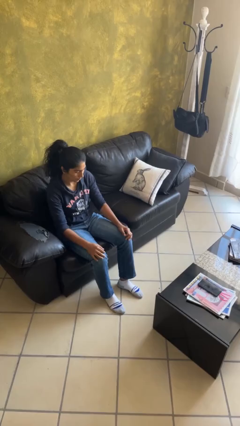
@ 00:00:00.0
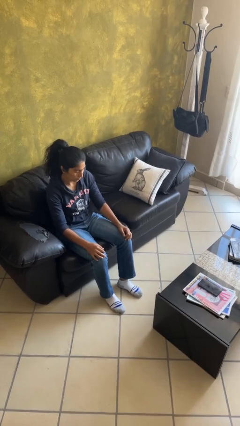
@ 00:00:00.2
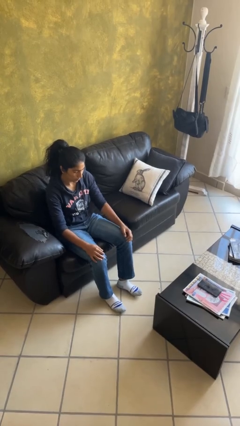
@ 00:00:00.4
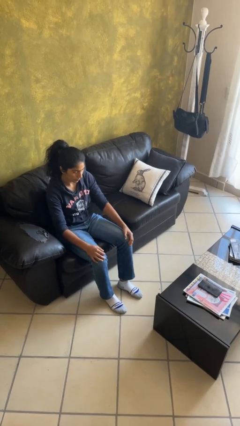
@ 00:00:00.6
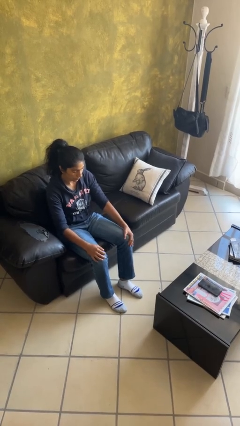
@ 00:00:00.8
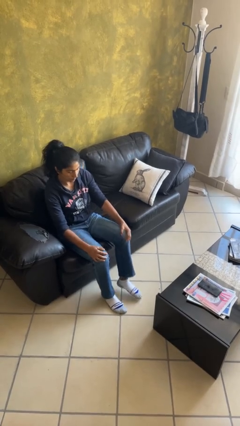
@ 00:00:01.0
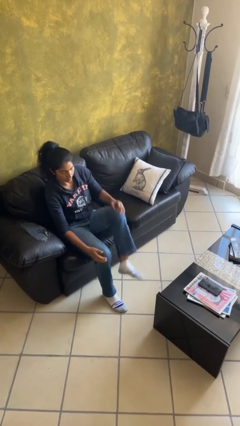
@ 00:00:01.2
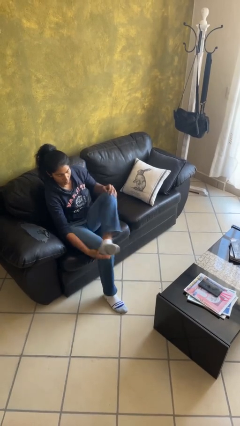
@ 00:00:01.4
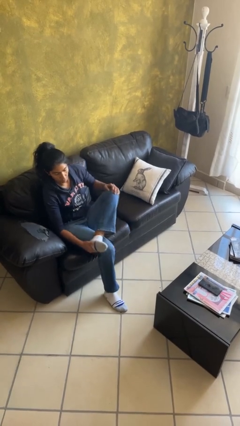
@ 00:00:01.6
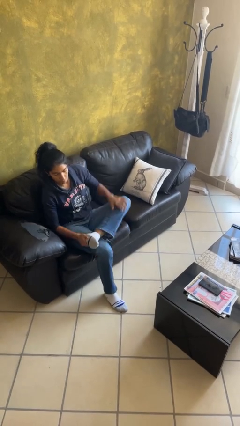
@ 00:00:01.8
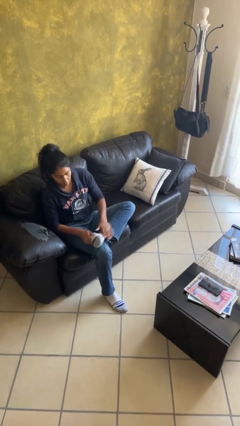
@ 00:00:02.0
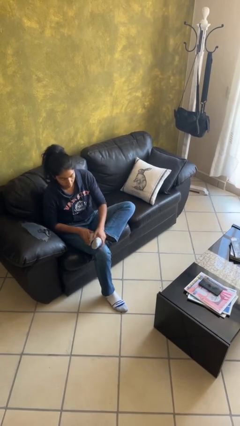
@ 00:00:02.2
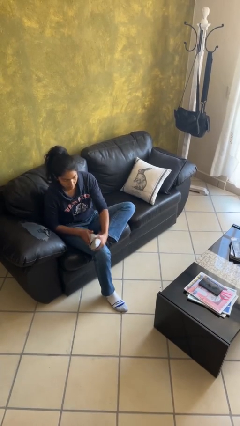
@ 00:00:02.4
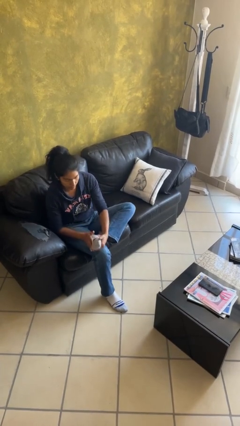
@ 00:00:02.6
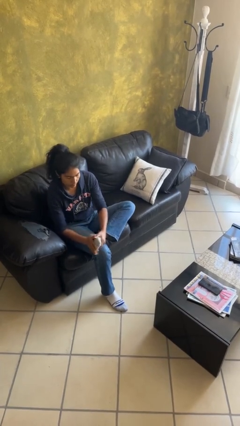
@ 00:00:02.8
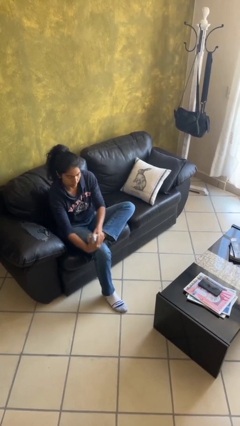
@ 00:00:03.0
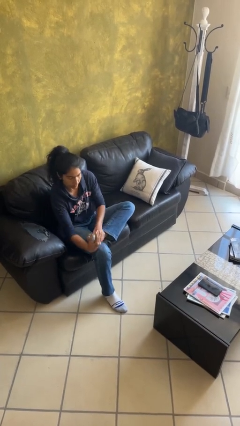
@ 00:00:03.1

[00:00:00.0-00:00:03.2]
person rubs foot

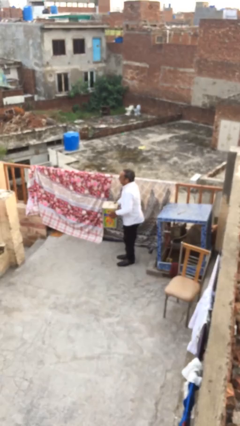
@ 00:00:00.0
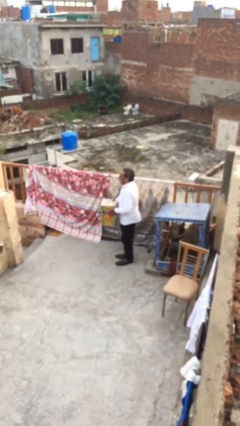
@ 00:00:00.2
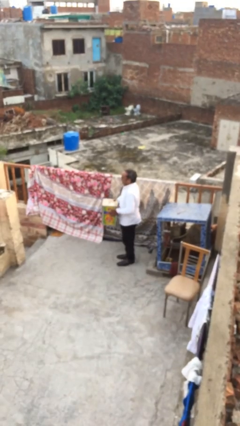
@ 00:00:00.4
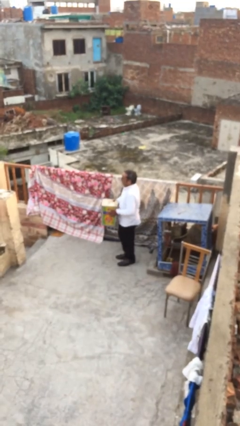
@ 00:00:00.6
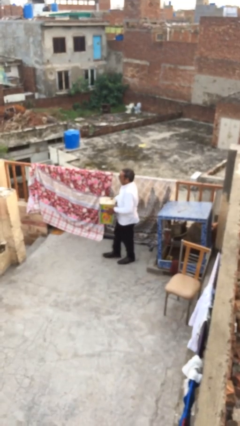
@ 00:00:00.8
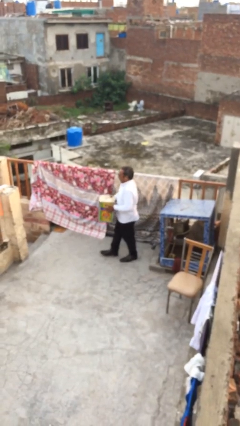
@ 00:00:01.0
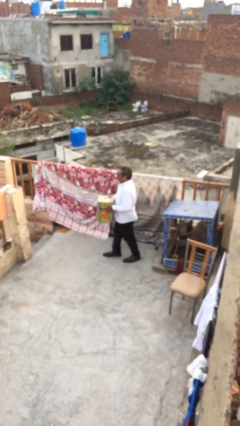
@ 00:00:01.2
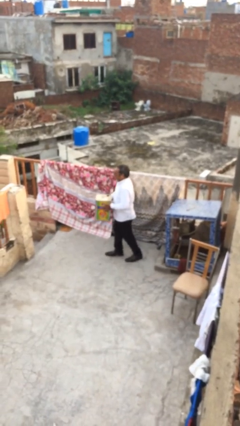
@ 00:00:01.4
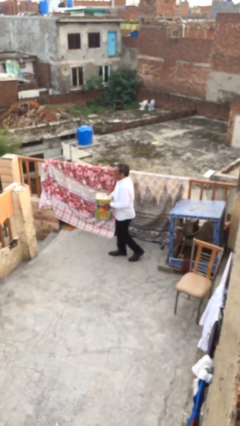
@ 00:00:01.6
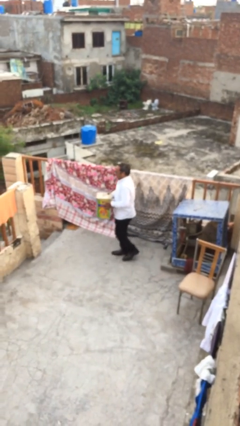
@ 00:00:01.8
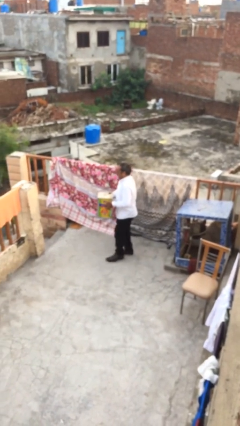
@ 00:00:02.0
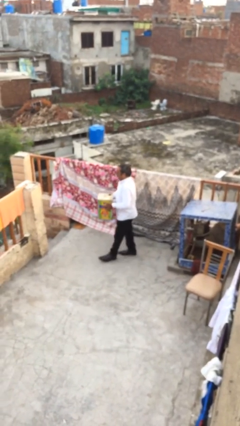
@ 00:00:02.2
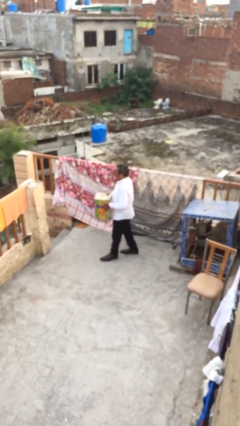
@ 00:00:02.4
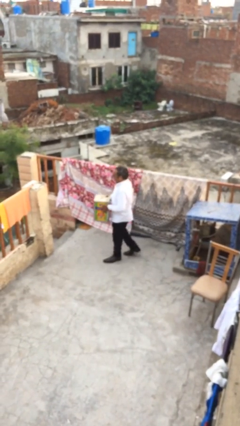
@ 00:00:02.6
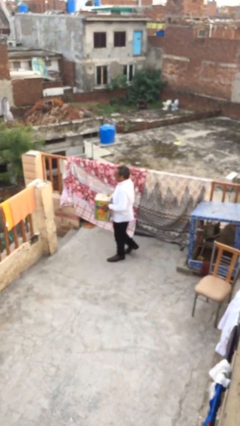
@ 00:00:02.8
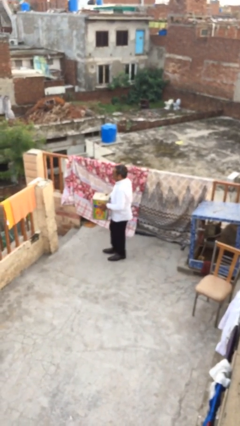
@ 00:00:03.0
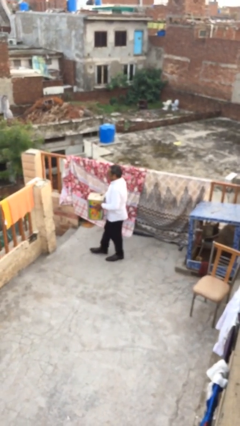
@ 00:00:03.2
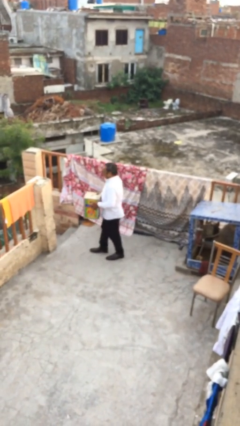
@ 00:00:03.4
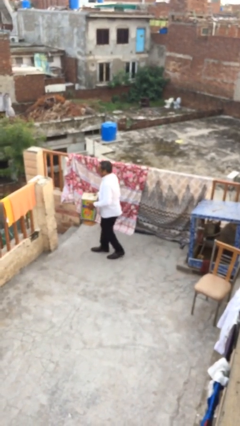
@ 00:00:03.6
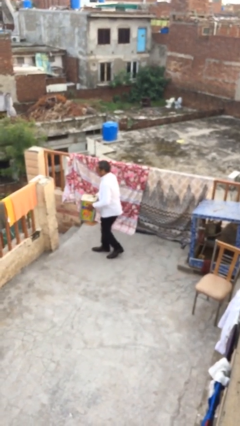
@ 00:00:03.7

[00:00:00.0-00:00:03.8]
person carries heavy object

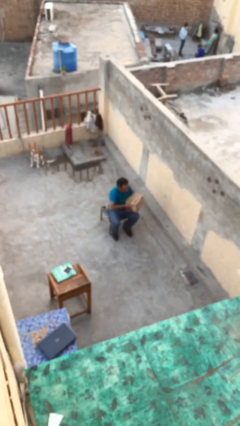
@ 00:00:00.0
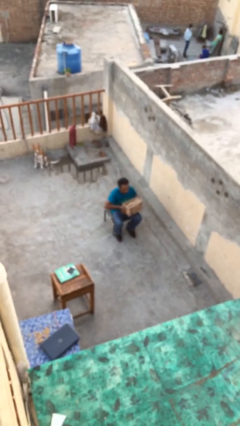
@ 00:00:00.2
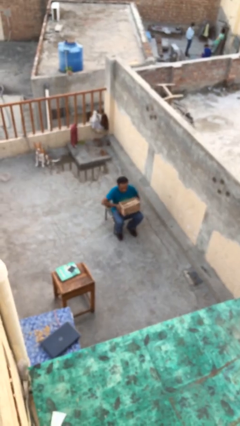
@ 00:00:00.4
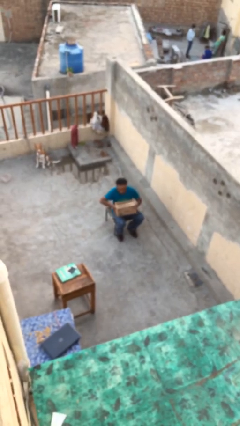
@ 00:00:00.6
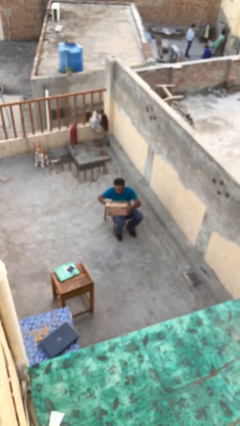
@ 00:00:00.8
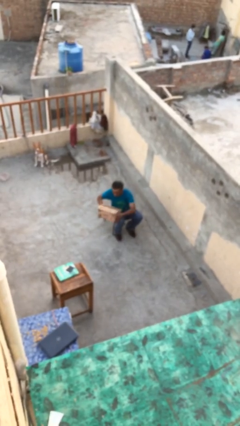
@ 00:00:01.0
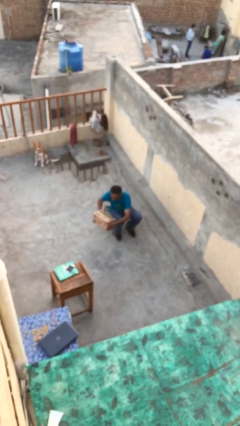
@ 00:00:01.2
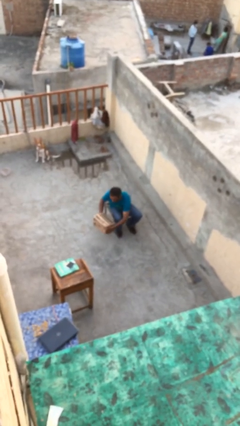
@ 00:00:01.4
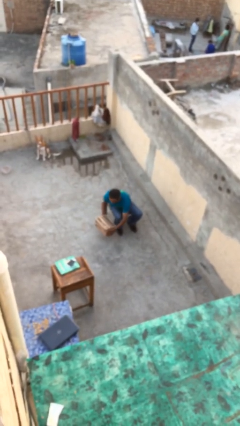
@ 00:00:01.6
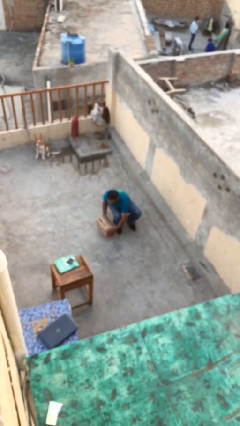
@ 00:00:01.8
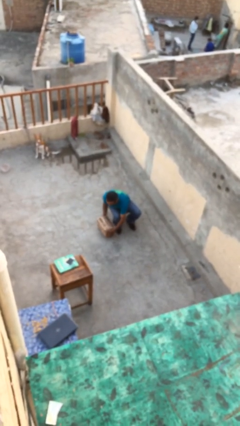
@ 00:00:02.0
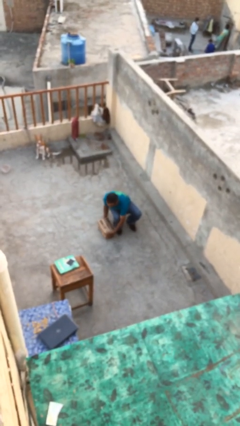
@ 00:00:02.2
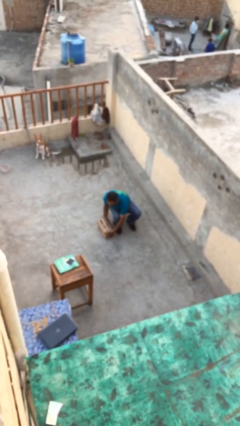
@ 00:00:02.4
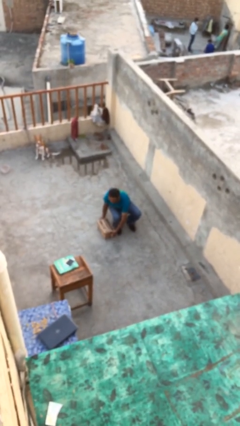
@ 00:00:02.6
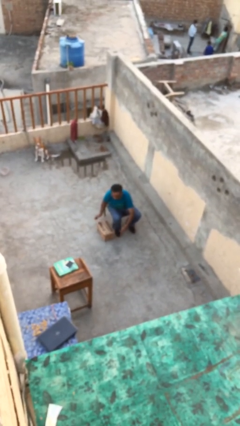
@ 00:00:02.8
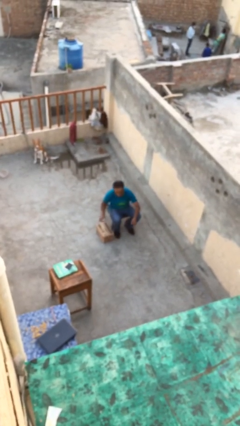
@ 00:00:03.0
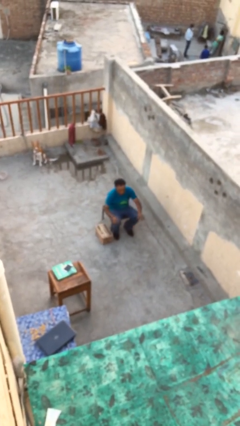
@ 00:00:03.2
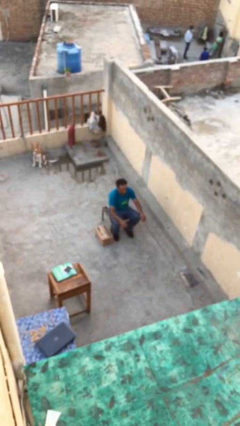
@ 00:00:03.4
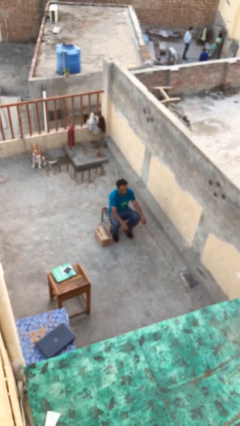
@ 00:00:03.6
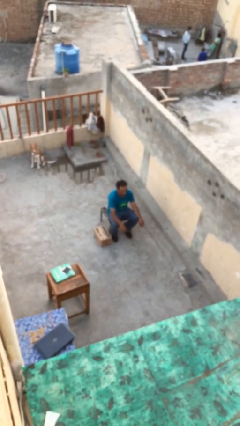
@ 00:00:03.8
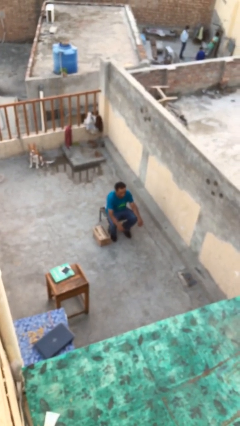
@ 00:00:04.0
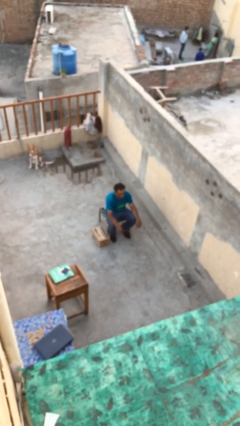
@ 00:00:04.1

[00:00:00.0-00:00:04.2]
person puts down object on floor

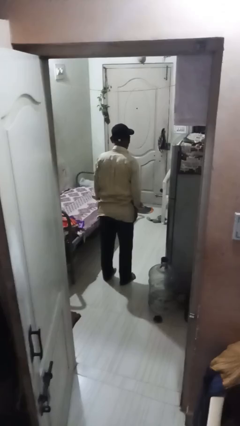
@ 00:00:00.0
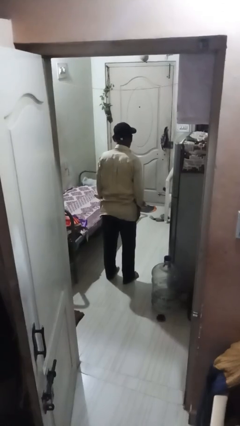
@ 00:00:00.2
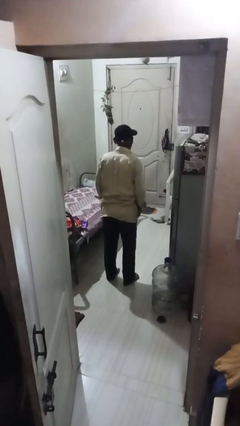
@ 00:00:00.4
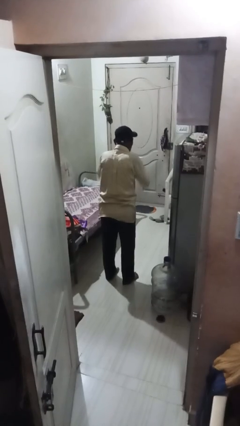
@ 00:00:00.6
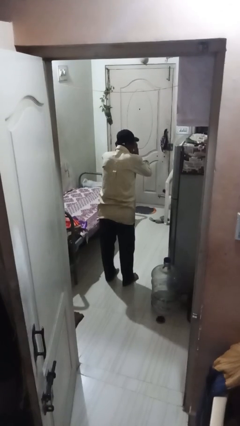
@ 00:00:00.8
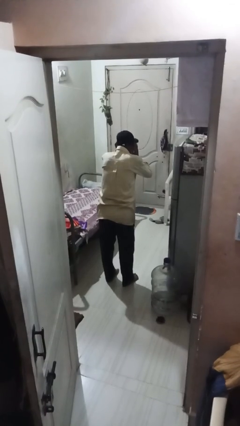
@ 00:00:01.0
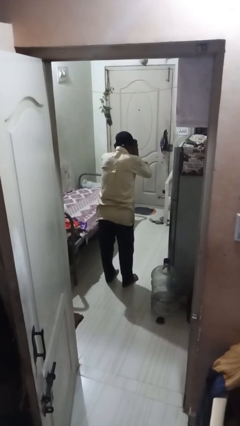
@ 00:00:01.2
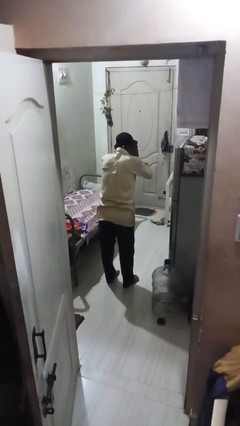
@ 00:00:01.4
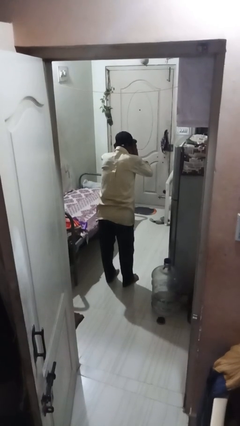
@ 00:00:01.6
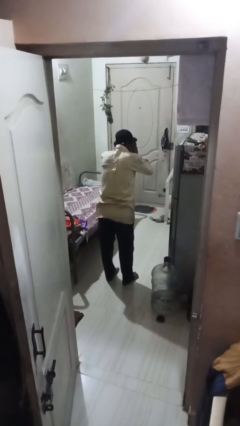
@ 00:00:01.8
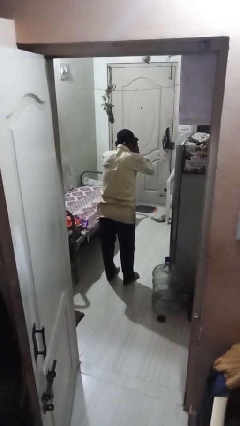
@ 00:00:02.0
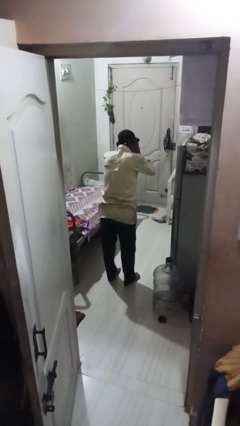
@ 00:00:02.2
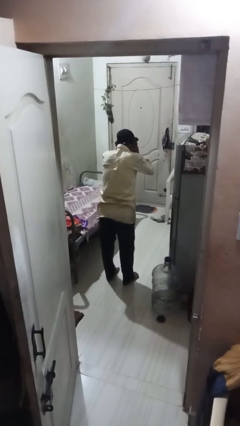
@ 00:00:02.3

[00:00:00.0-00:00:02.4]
person prays

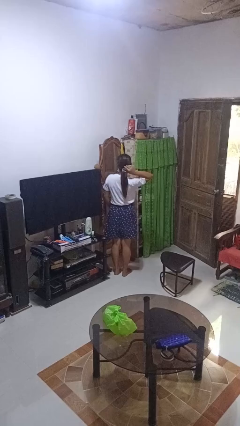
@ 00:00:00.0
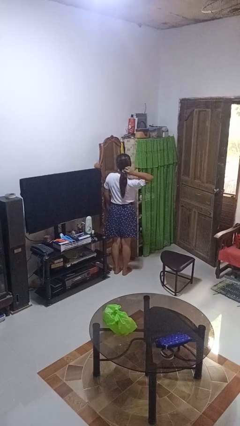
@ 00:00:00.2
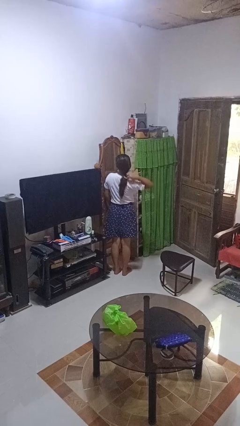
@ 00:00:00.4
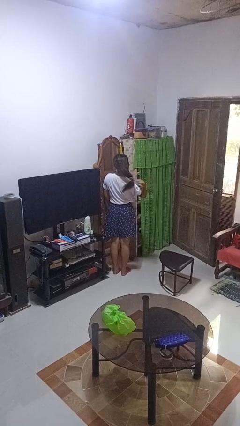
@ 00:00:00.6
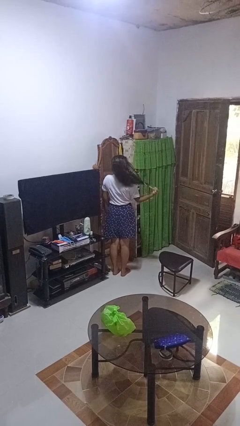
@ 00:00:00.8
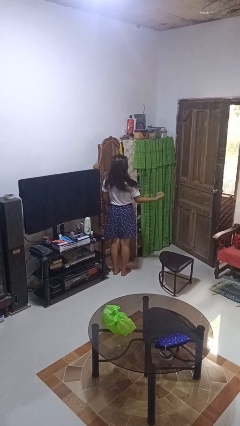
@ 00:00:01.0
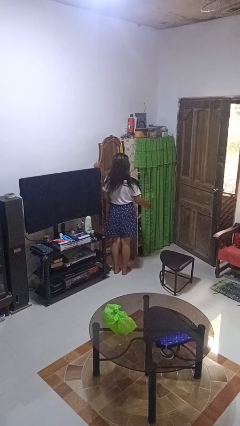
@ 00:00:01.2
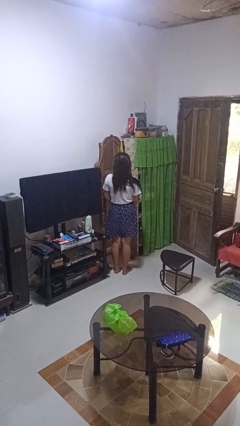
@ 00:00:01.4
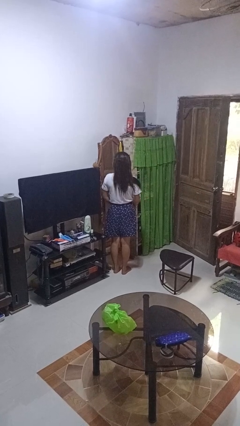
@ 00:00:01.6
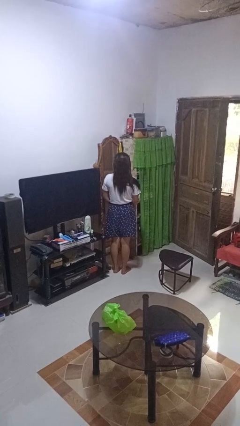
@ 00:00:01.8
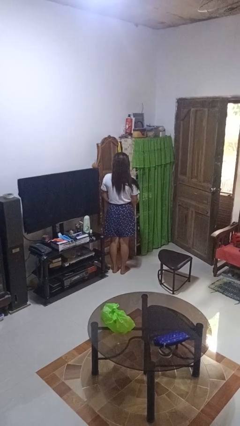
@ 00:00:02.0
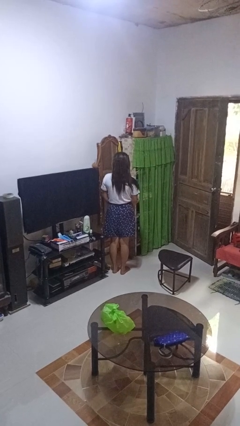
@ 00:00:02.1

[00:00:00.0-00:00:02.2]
person takes off hairtie

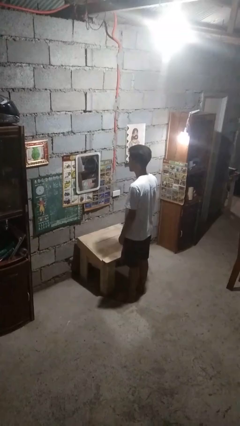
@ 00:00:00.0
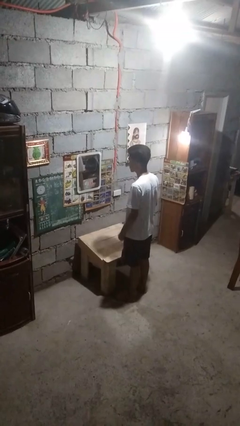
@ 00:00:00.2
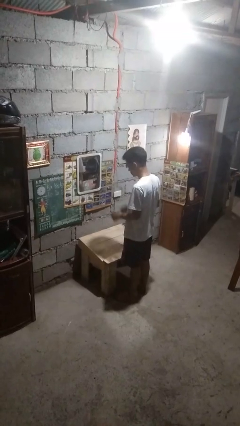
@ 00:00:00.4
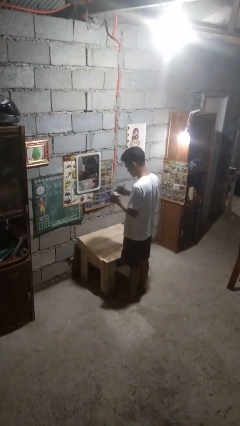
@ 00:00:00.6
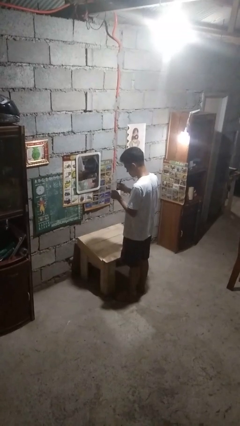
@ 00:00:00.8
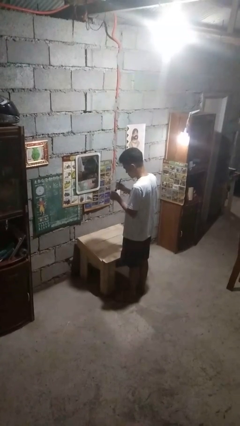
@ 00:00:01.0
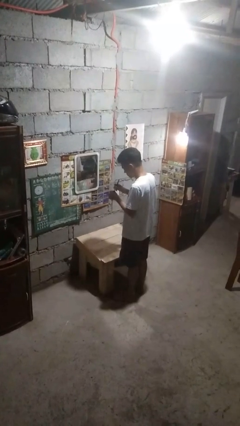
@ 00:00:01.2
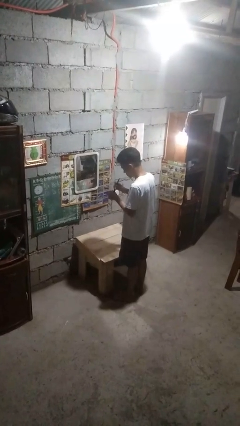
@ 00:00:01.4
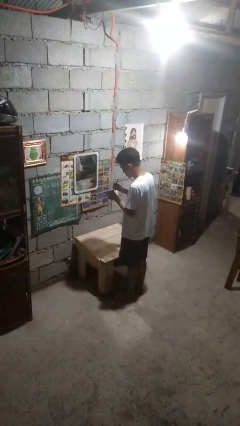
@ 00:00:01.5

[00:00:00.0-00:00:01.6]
person applies foundation makeup
